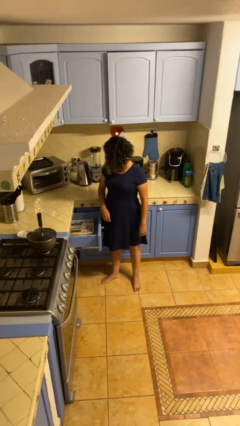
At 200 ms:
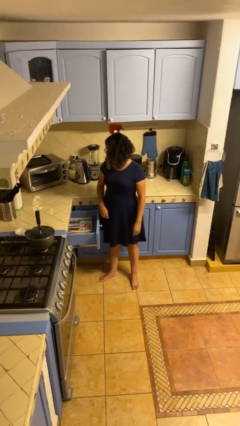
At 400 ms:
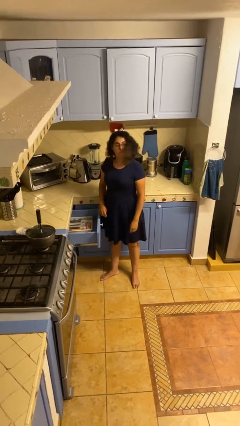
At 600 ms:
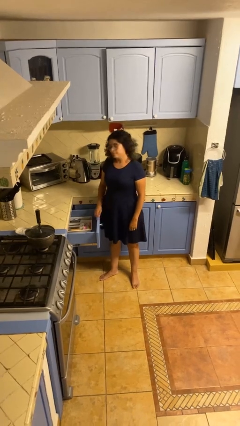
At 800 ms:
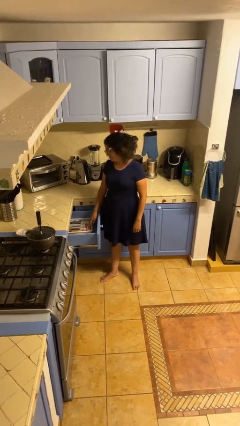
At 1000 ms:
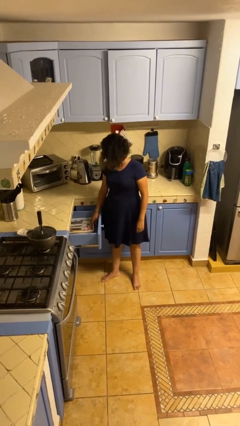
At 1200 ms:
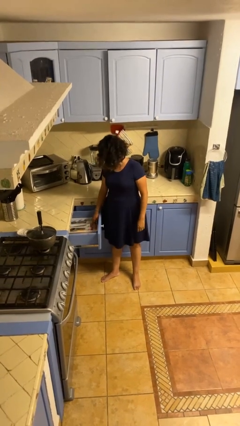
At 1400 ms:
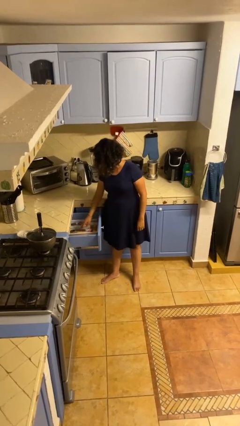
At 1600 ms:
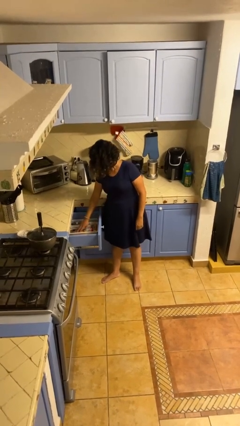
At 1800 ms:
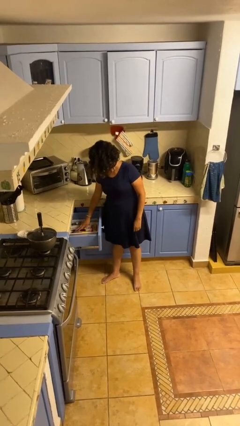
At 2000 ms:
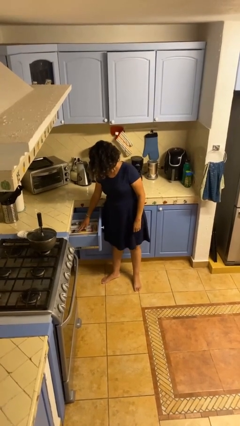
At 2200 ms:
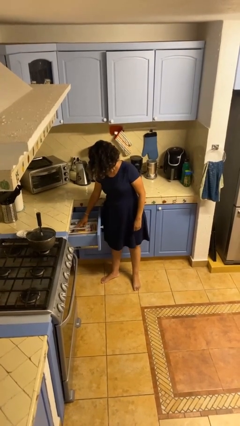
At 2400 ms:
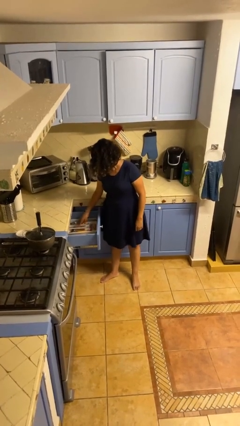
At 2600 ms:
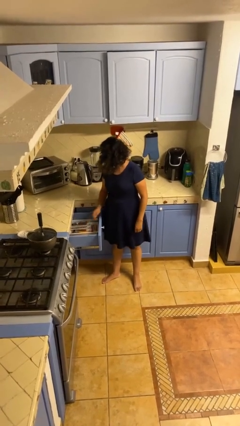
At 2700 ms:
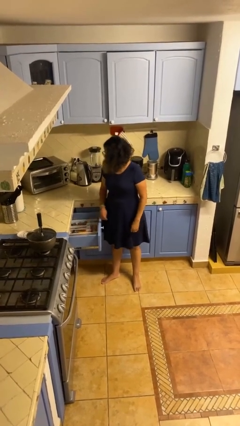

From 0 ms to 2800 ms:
person searches in kitchen drawer

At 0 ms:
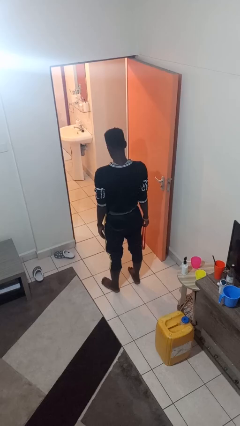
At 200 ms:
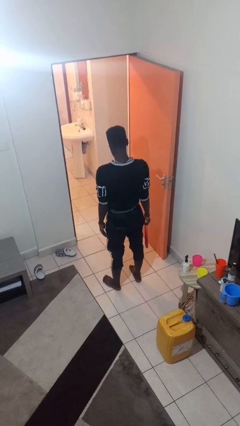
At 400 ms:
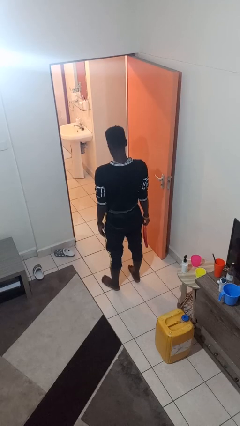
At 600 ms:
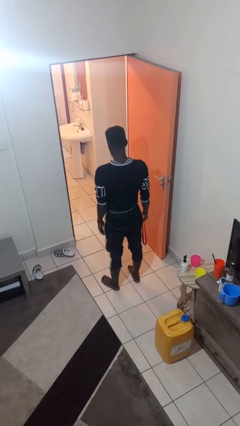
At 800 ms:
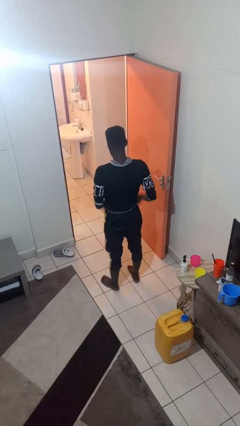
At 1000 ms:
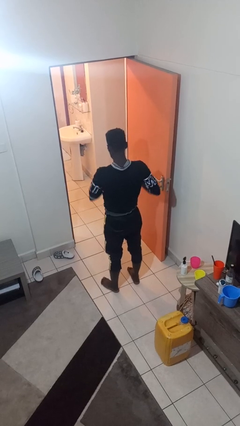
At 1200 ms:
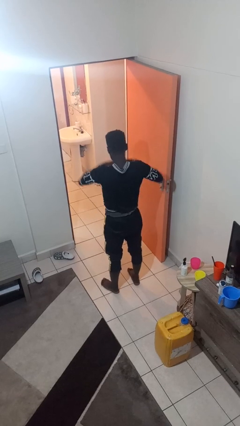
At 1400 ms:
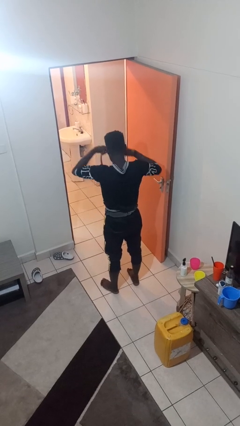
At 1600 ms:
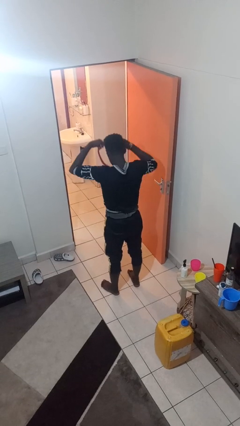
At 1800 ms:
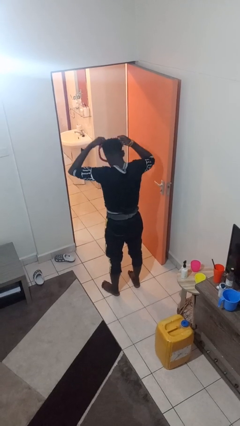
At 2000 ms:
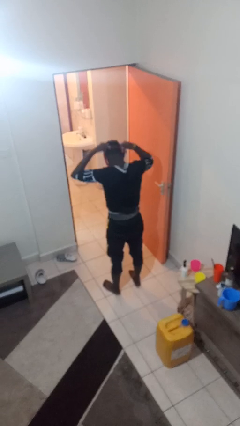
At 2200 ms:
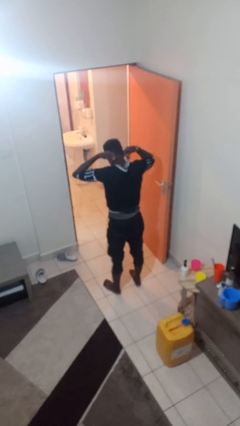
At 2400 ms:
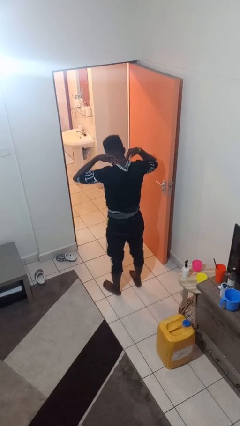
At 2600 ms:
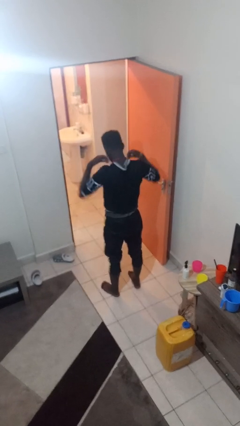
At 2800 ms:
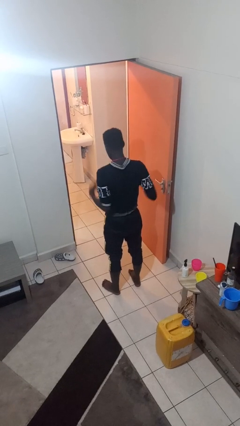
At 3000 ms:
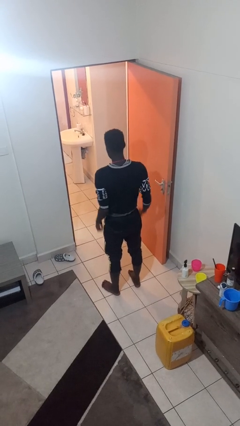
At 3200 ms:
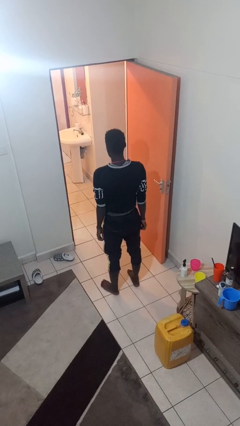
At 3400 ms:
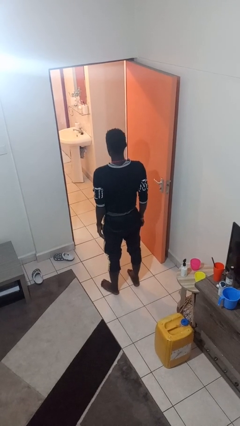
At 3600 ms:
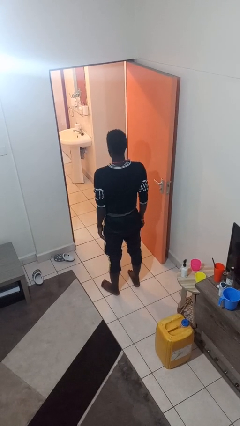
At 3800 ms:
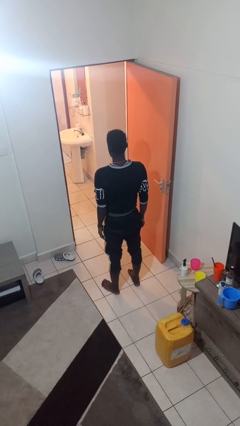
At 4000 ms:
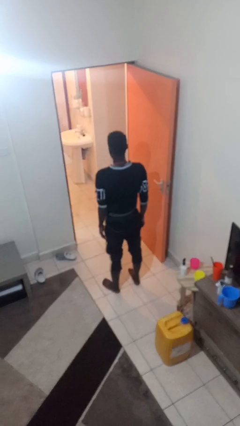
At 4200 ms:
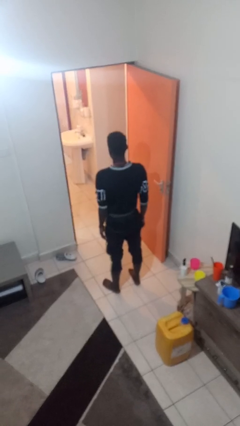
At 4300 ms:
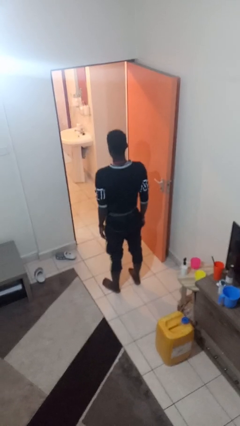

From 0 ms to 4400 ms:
person puts on necklace

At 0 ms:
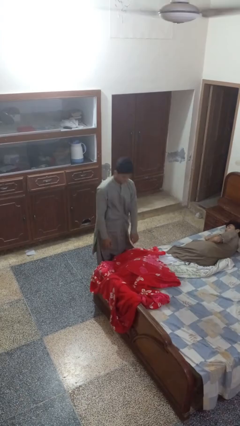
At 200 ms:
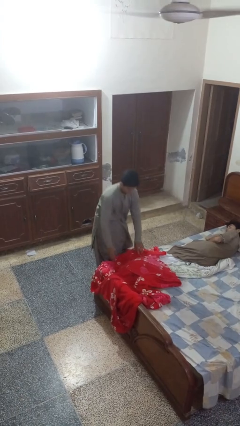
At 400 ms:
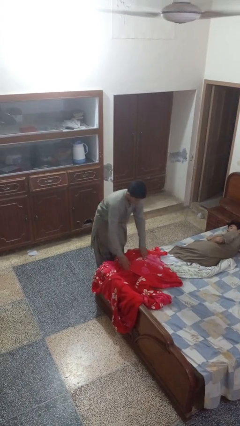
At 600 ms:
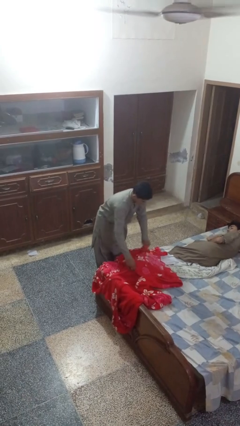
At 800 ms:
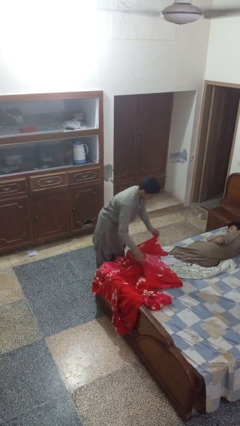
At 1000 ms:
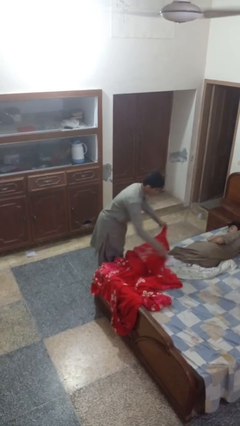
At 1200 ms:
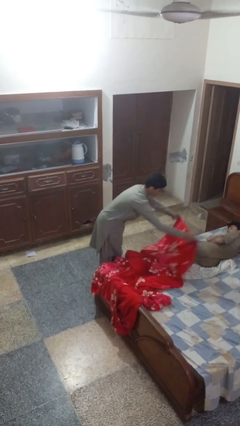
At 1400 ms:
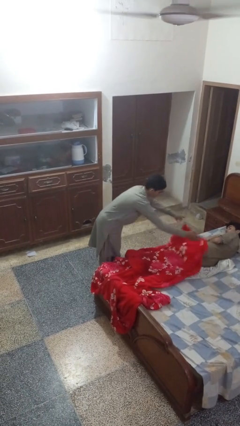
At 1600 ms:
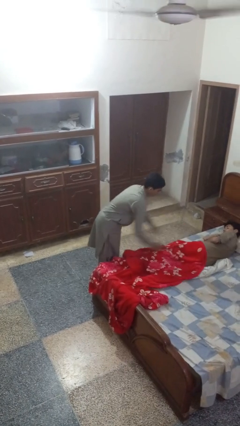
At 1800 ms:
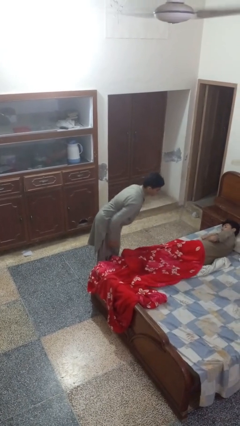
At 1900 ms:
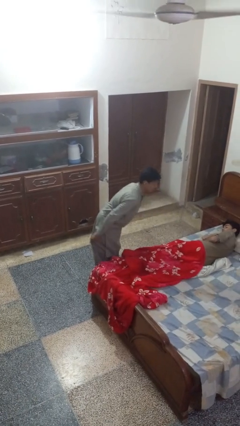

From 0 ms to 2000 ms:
person covers friend with blanket

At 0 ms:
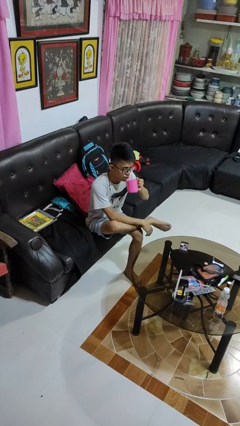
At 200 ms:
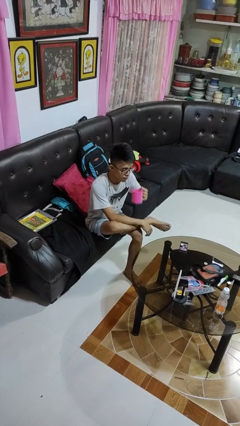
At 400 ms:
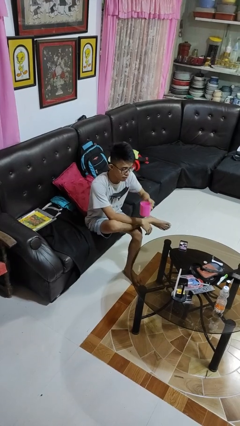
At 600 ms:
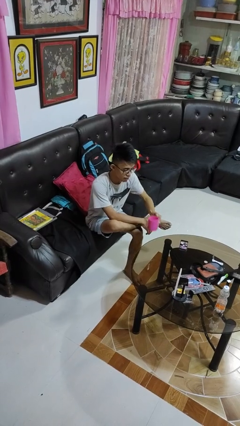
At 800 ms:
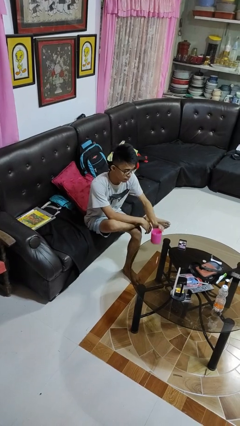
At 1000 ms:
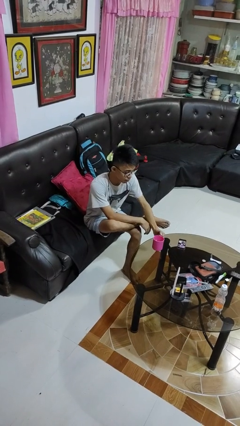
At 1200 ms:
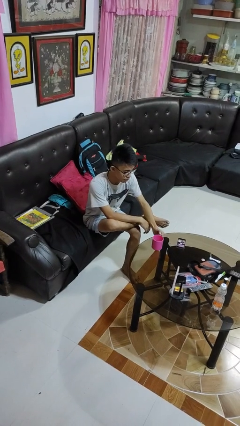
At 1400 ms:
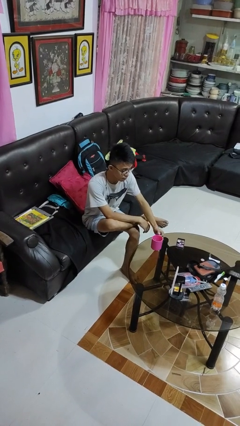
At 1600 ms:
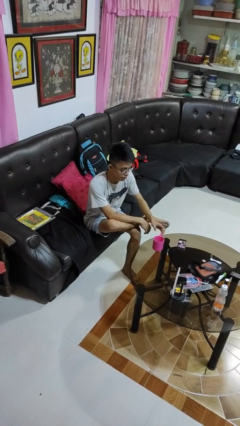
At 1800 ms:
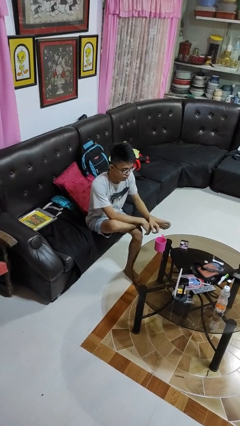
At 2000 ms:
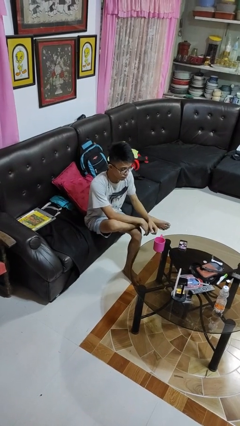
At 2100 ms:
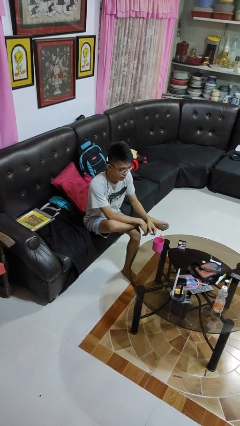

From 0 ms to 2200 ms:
person puts down object on table

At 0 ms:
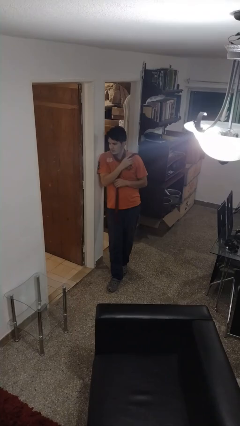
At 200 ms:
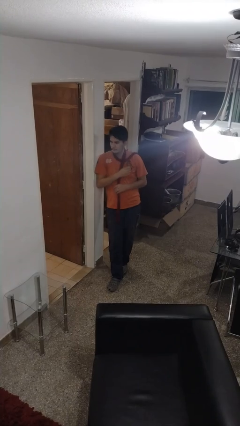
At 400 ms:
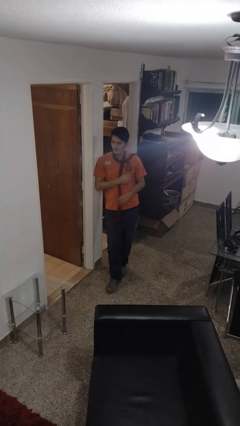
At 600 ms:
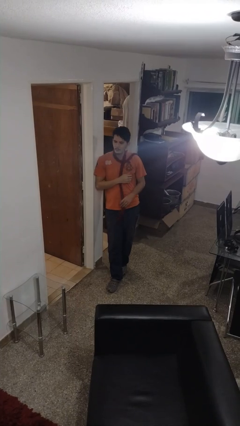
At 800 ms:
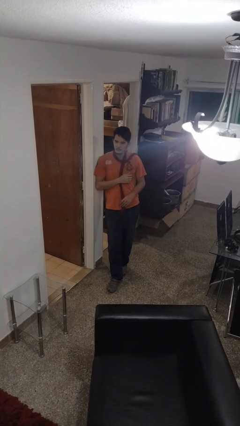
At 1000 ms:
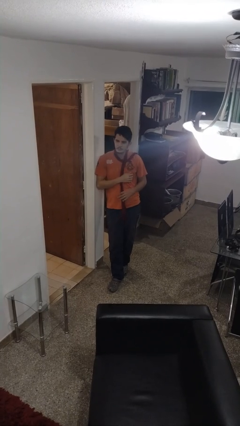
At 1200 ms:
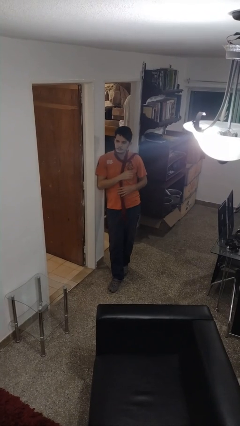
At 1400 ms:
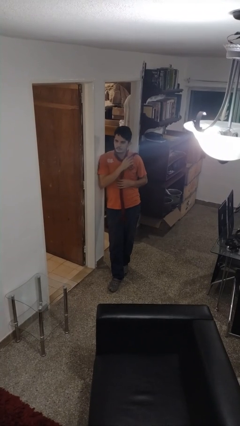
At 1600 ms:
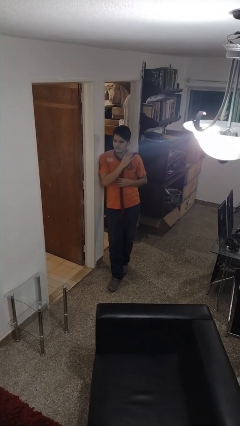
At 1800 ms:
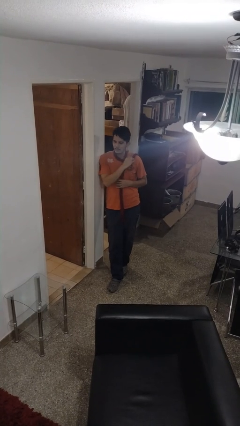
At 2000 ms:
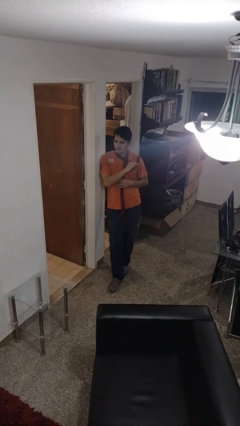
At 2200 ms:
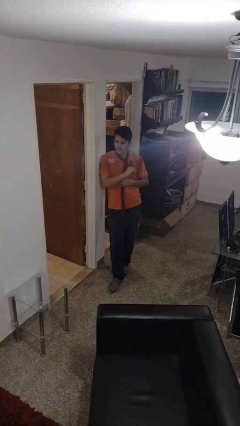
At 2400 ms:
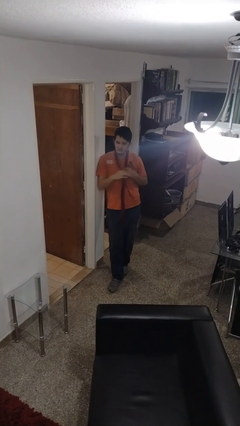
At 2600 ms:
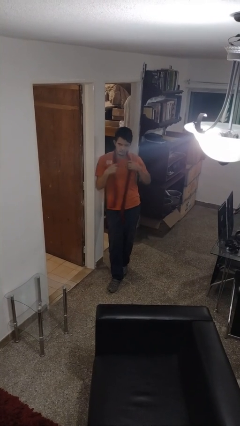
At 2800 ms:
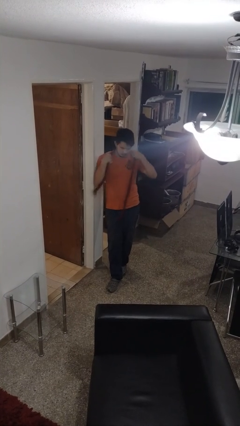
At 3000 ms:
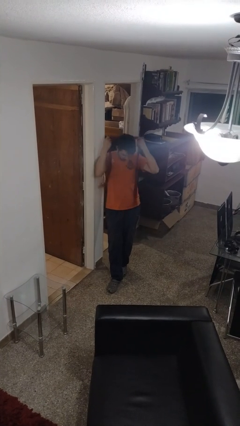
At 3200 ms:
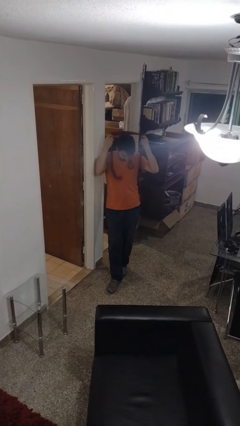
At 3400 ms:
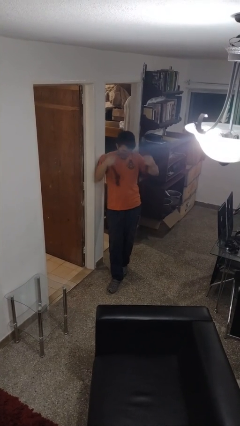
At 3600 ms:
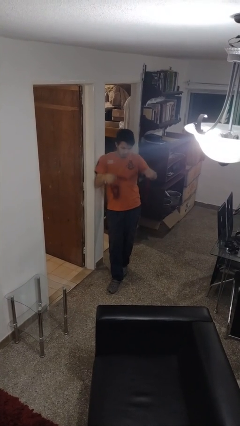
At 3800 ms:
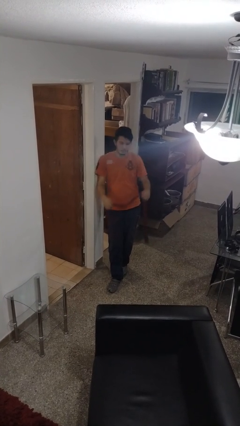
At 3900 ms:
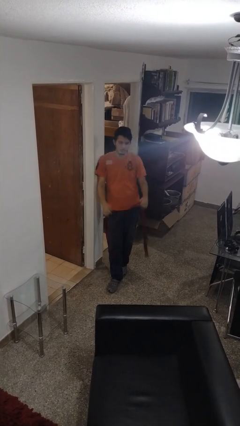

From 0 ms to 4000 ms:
person takes off scarf

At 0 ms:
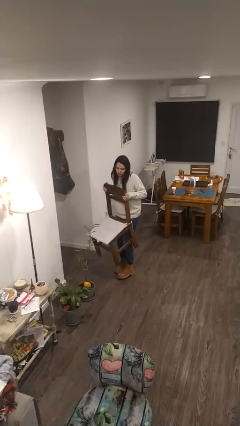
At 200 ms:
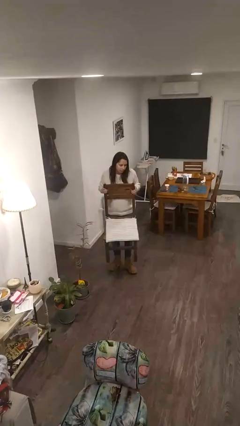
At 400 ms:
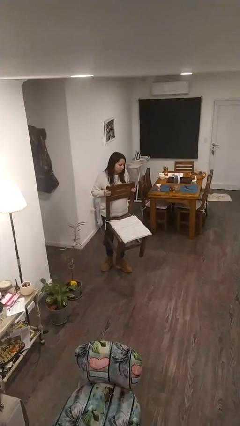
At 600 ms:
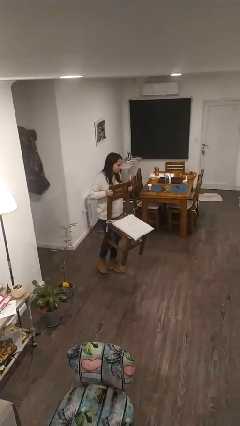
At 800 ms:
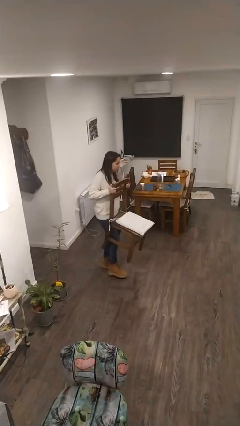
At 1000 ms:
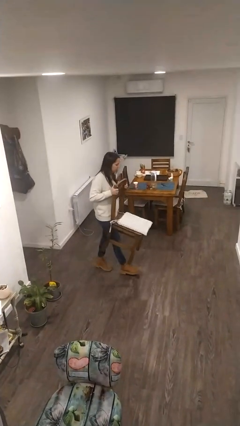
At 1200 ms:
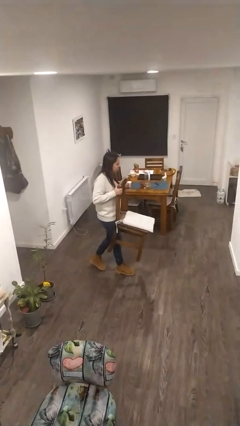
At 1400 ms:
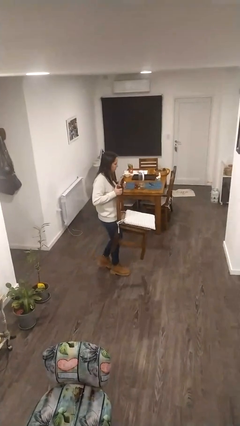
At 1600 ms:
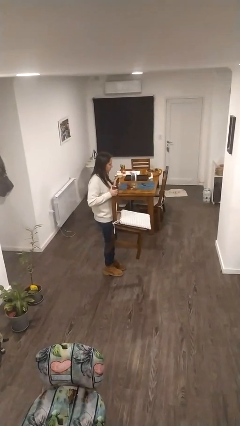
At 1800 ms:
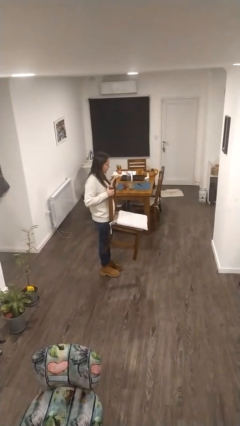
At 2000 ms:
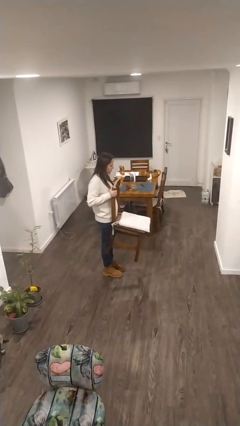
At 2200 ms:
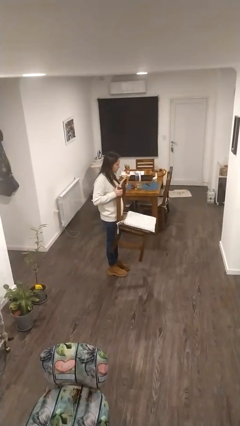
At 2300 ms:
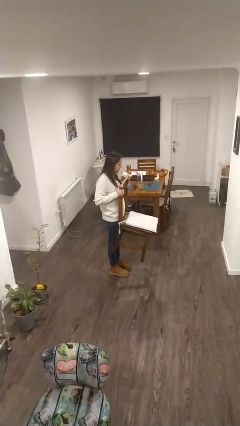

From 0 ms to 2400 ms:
person carries furniture
